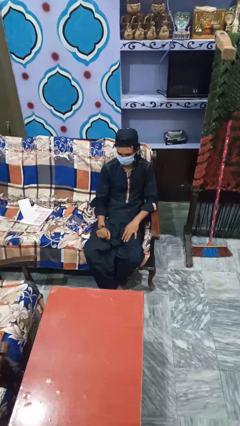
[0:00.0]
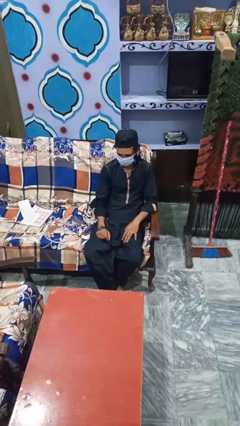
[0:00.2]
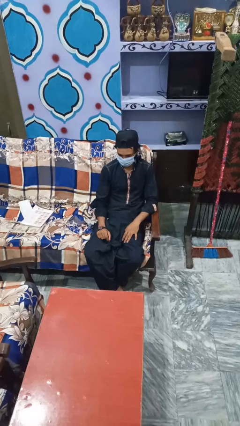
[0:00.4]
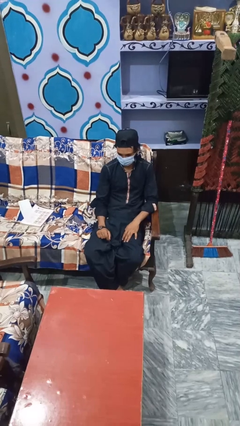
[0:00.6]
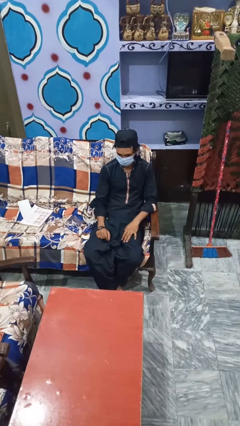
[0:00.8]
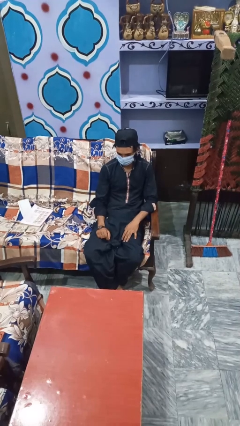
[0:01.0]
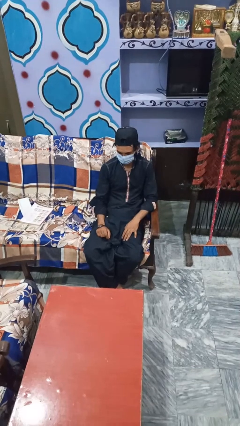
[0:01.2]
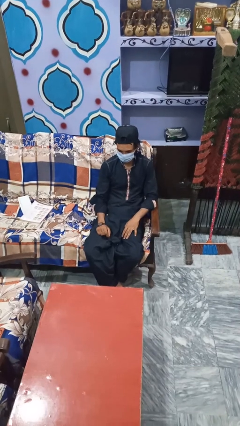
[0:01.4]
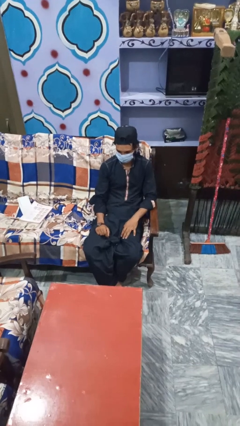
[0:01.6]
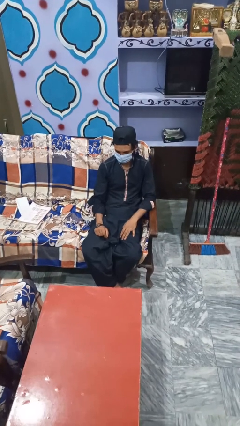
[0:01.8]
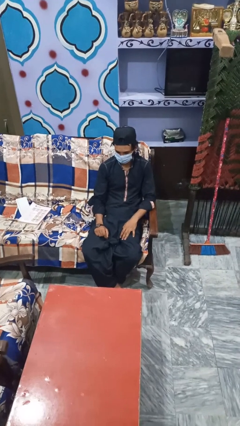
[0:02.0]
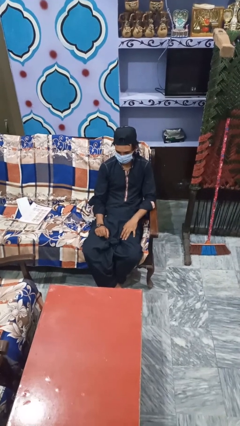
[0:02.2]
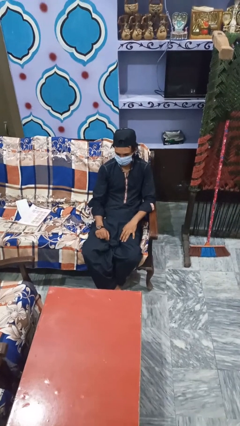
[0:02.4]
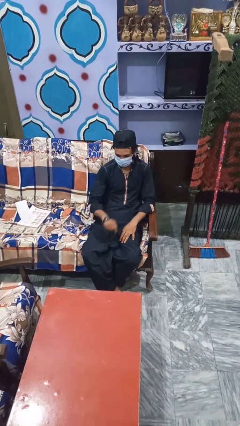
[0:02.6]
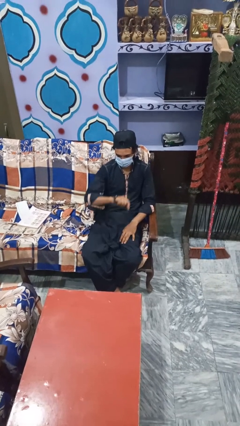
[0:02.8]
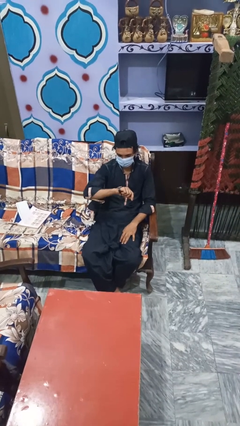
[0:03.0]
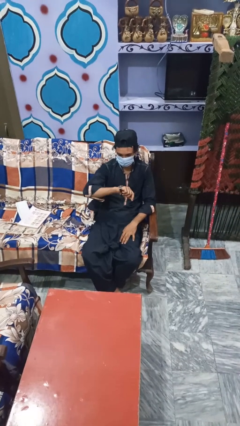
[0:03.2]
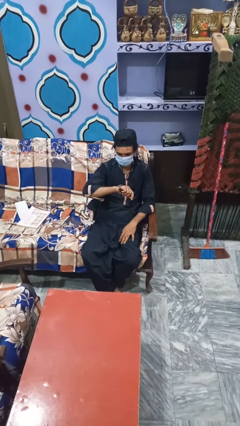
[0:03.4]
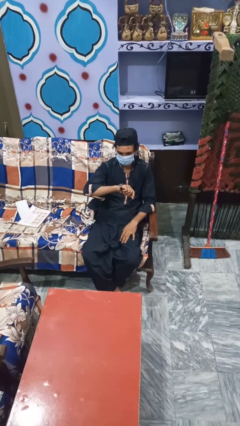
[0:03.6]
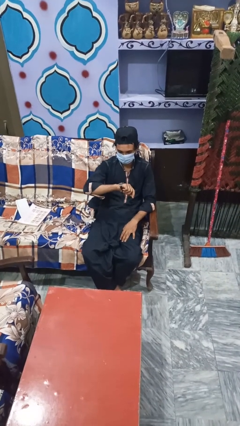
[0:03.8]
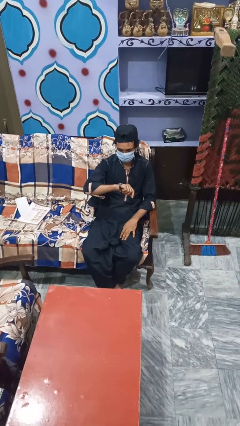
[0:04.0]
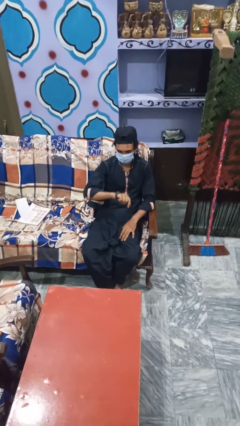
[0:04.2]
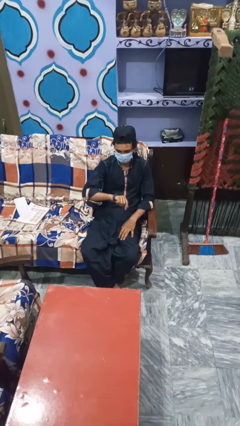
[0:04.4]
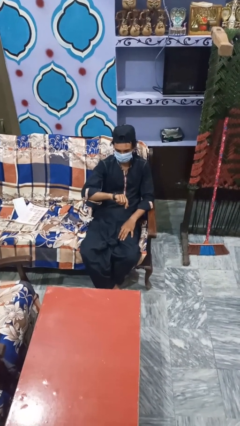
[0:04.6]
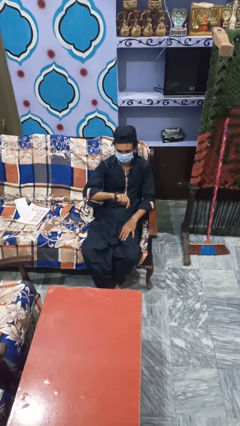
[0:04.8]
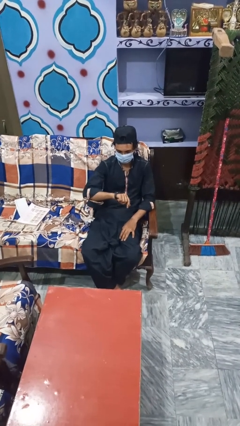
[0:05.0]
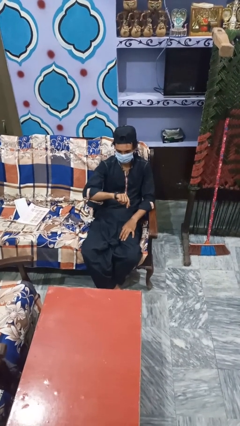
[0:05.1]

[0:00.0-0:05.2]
person looks at wristwatch

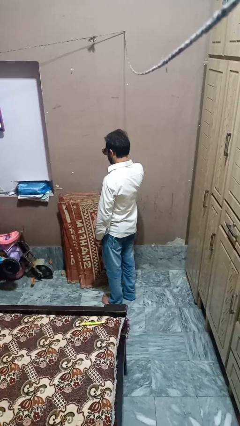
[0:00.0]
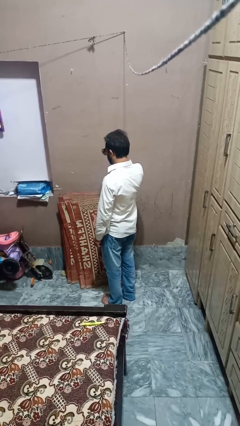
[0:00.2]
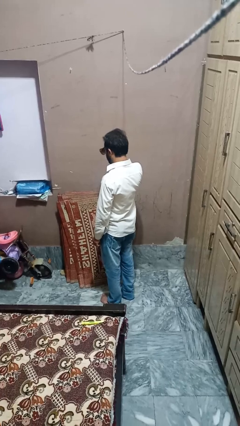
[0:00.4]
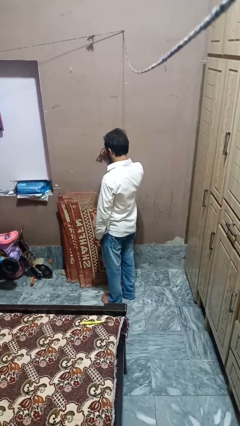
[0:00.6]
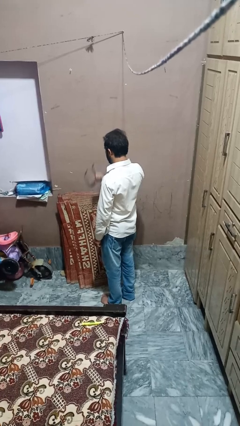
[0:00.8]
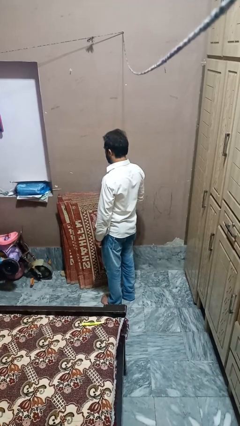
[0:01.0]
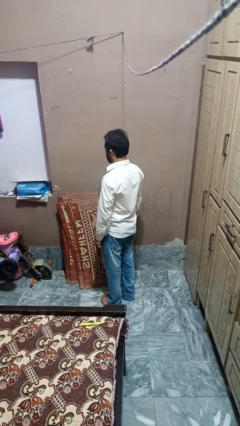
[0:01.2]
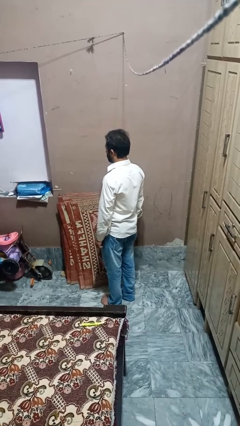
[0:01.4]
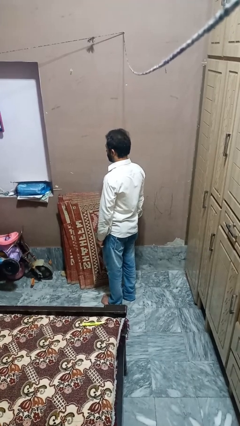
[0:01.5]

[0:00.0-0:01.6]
person takes off sunglasses

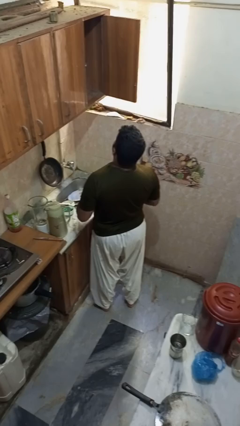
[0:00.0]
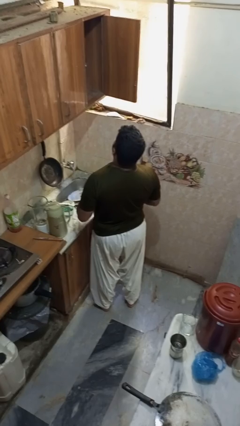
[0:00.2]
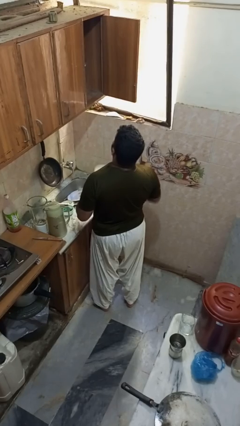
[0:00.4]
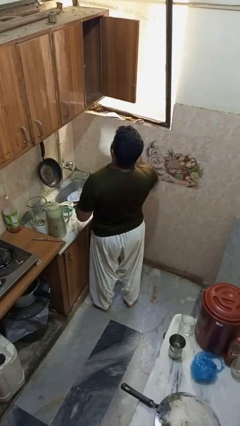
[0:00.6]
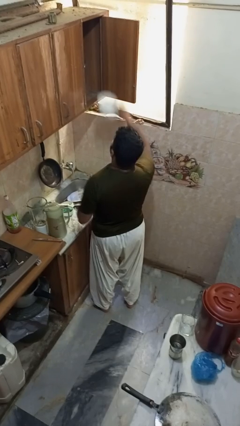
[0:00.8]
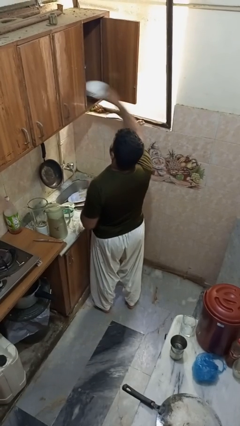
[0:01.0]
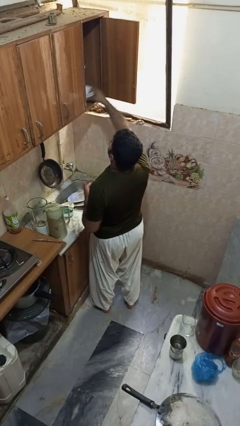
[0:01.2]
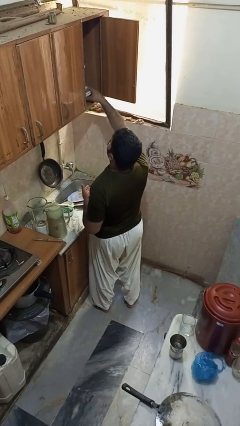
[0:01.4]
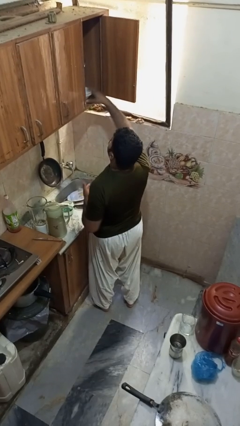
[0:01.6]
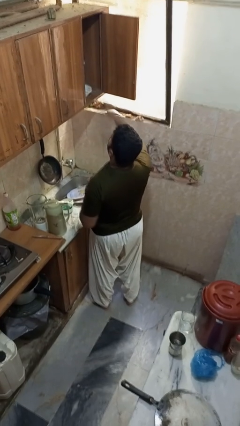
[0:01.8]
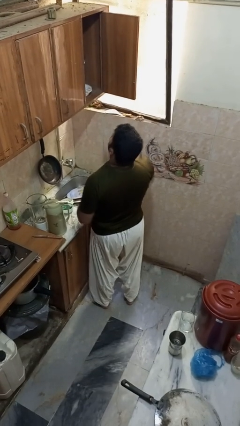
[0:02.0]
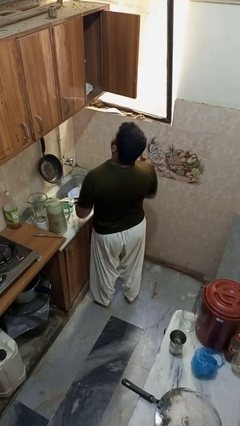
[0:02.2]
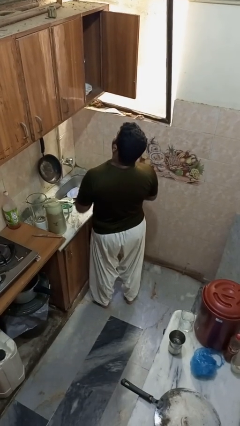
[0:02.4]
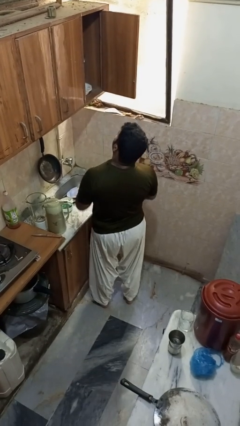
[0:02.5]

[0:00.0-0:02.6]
person puts object in cabinet

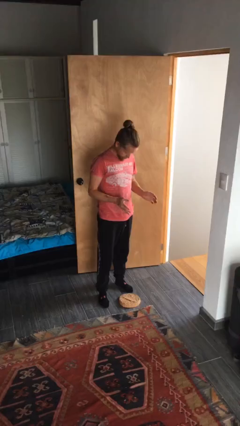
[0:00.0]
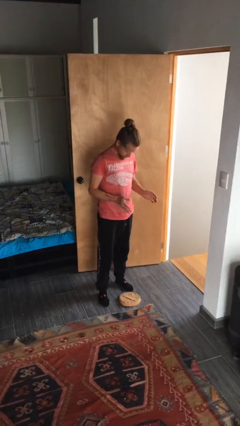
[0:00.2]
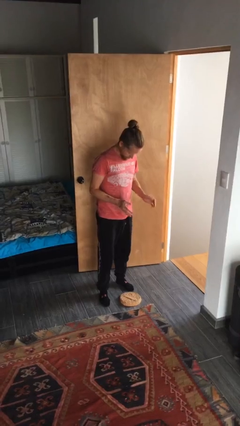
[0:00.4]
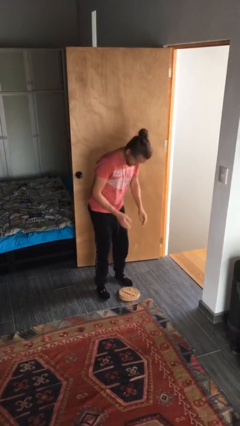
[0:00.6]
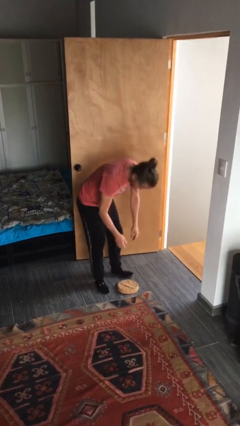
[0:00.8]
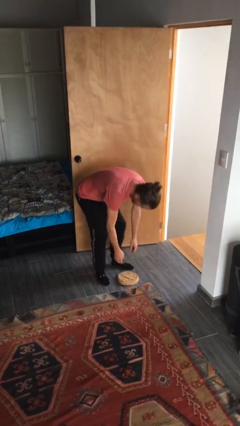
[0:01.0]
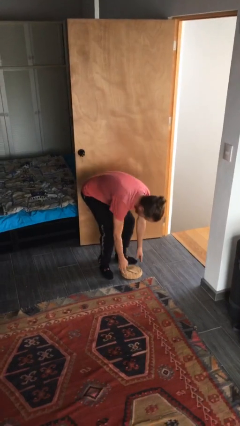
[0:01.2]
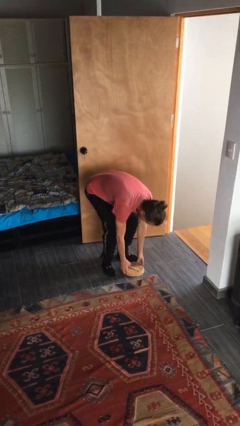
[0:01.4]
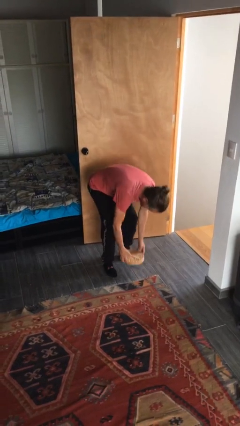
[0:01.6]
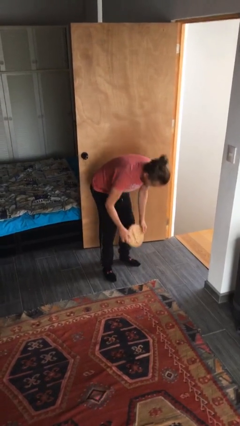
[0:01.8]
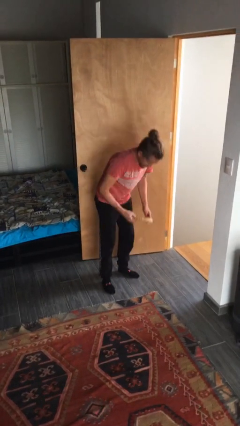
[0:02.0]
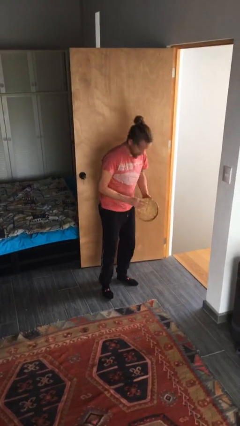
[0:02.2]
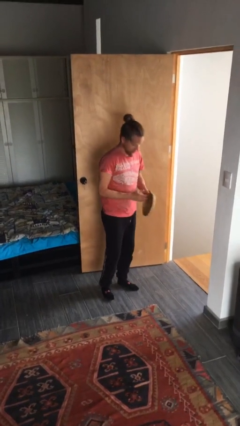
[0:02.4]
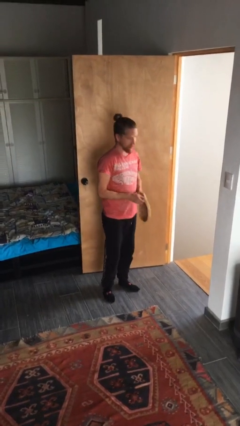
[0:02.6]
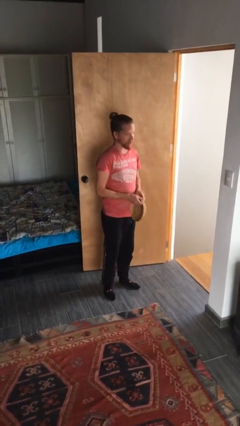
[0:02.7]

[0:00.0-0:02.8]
person picks up object from floor

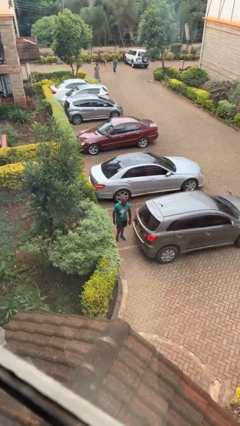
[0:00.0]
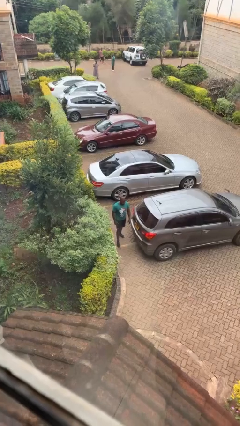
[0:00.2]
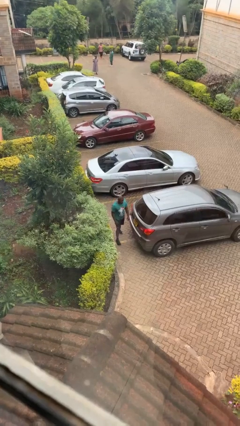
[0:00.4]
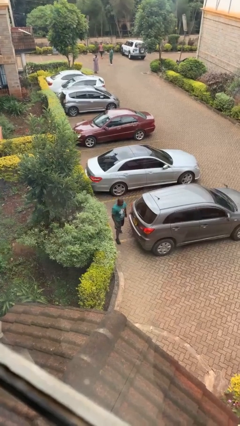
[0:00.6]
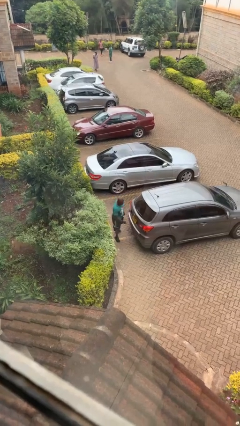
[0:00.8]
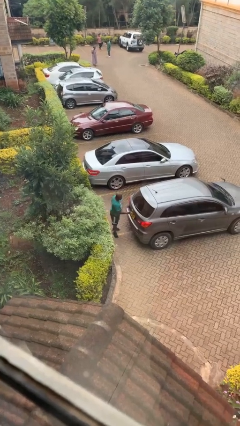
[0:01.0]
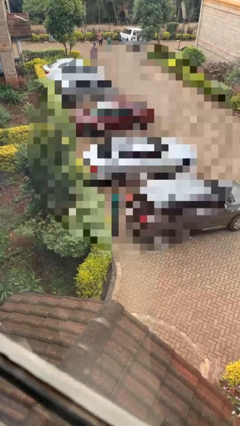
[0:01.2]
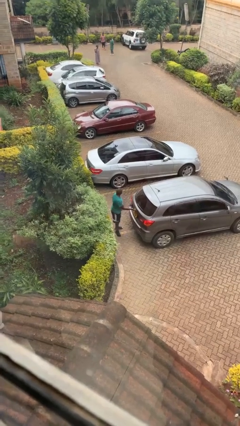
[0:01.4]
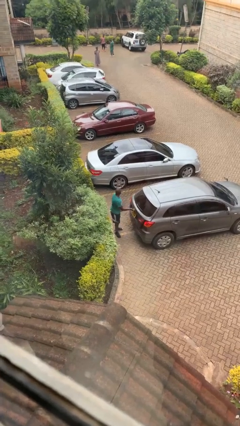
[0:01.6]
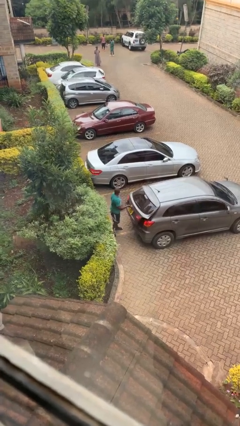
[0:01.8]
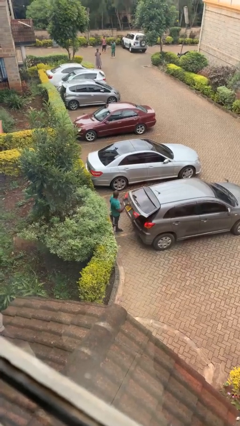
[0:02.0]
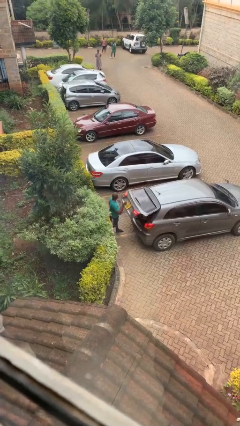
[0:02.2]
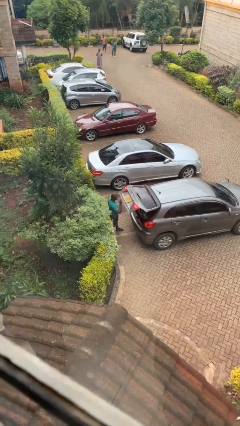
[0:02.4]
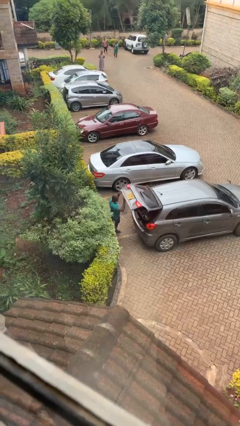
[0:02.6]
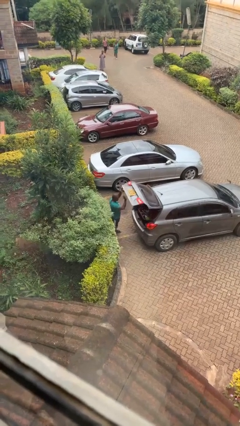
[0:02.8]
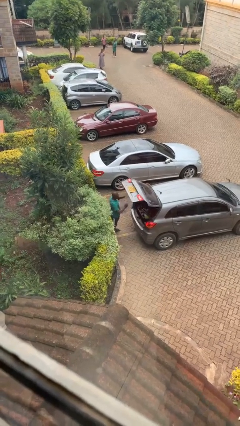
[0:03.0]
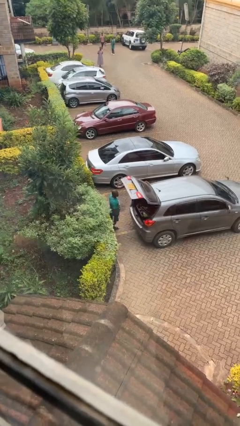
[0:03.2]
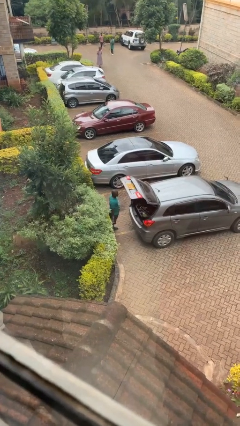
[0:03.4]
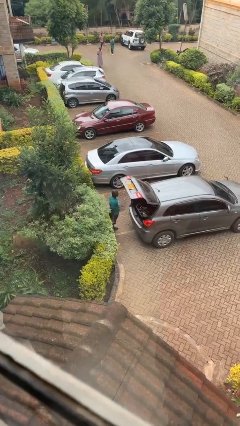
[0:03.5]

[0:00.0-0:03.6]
person opens car trunk

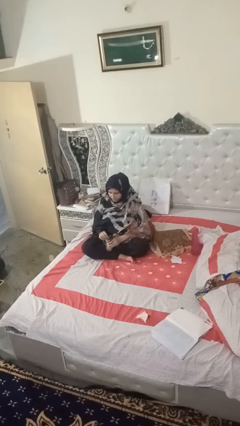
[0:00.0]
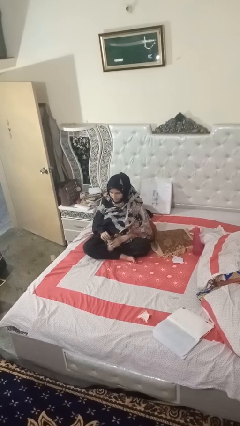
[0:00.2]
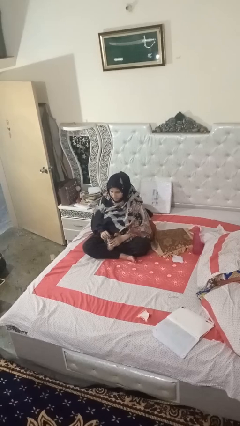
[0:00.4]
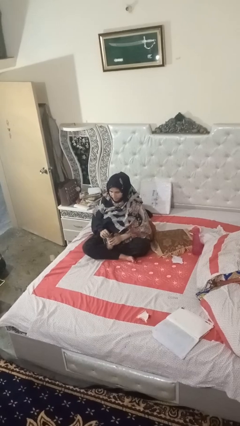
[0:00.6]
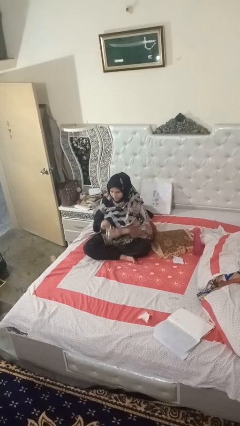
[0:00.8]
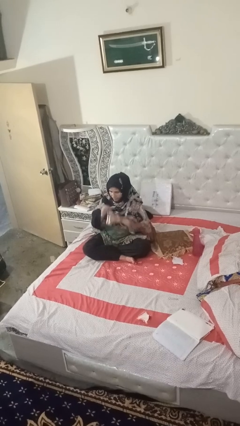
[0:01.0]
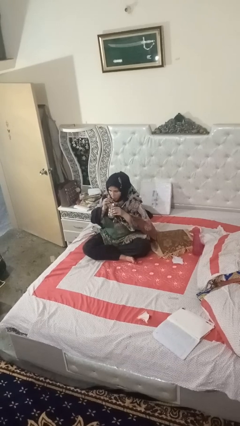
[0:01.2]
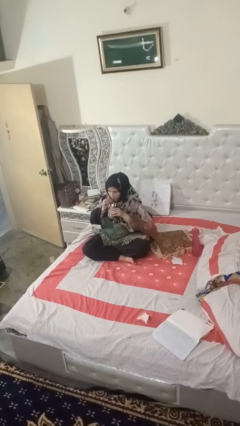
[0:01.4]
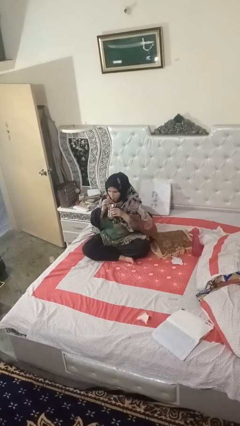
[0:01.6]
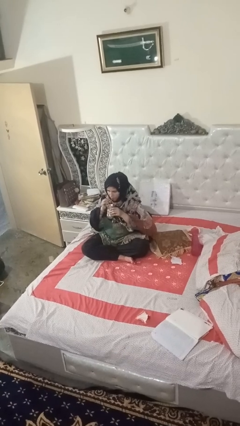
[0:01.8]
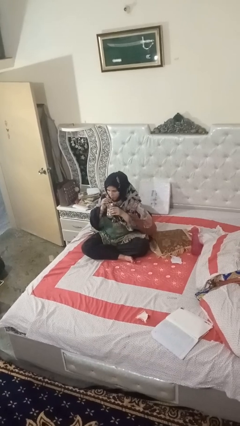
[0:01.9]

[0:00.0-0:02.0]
person drinks from straw
